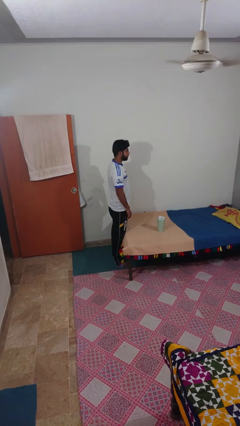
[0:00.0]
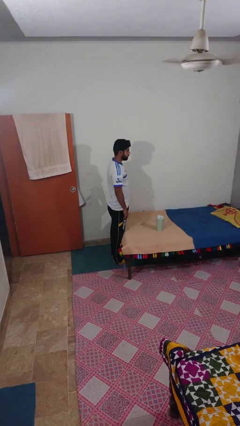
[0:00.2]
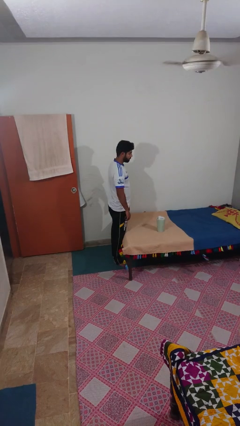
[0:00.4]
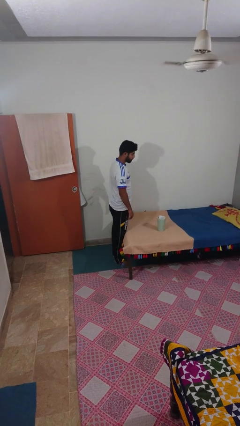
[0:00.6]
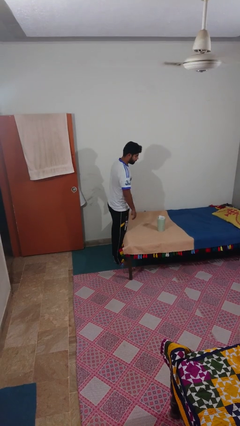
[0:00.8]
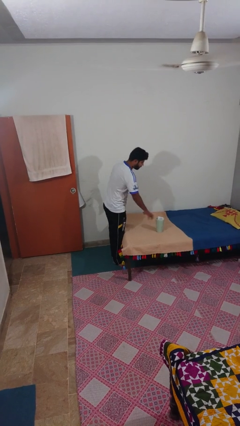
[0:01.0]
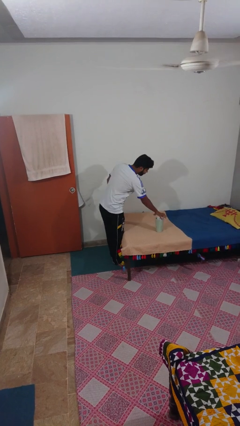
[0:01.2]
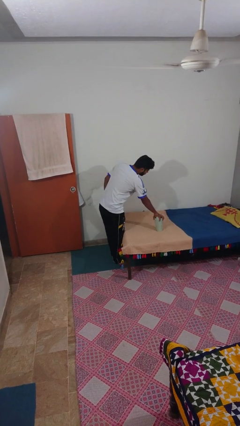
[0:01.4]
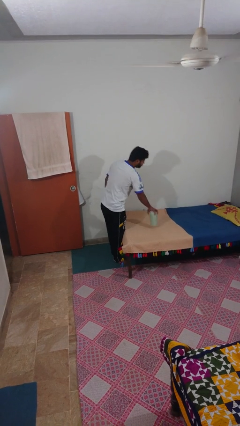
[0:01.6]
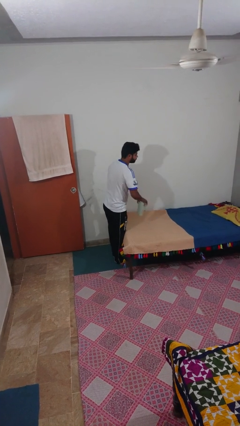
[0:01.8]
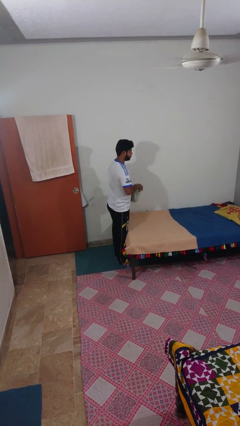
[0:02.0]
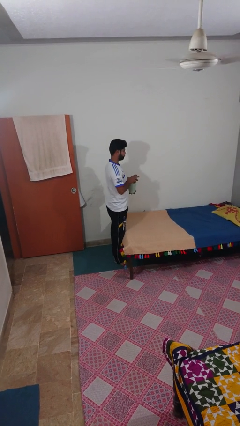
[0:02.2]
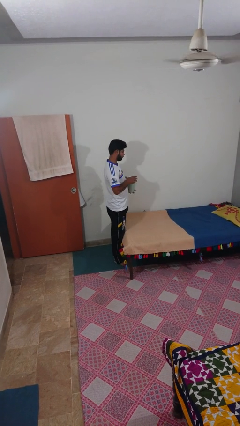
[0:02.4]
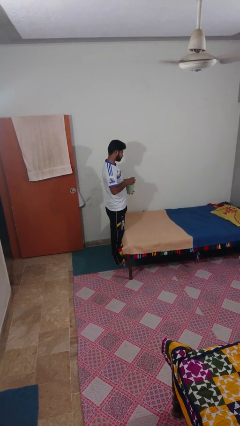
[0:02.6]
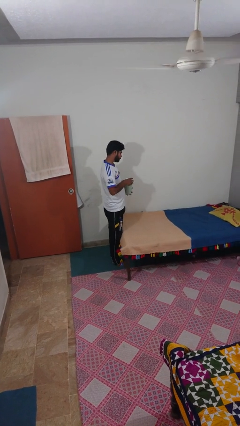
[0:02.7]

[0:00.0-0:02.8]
person picks up object from bed

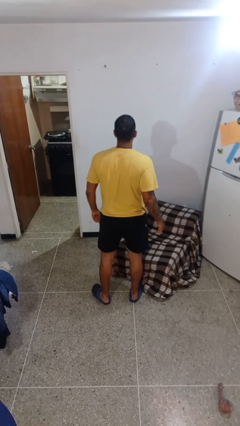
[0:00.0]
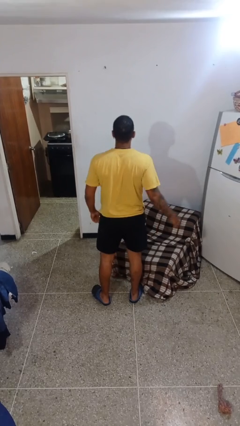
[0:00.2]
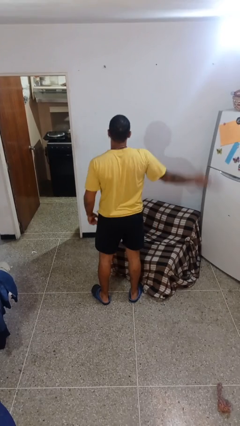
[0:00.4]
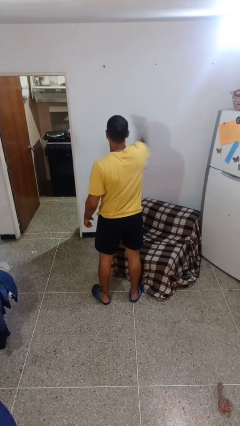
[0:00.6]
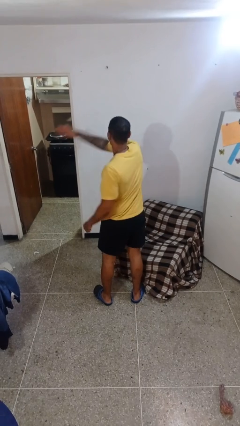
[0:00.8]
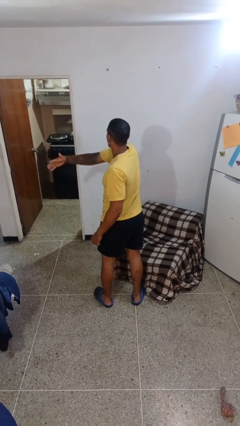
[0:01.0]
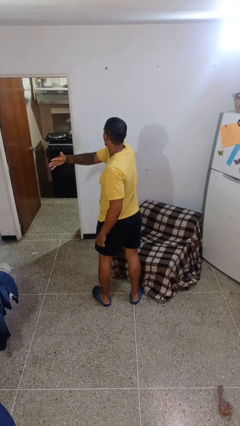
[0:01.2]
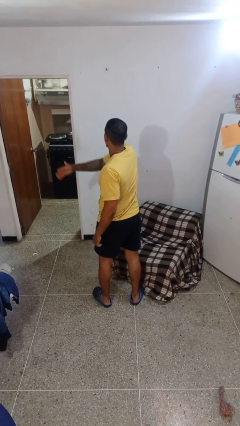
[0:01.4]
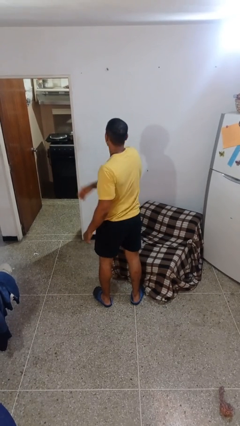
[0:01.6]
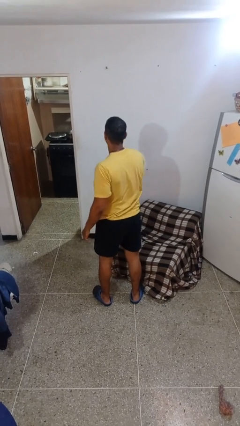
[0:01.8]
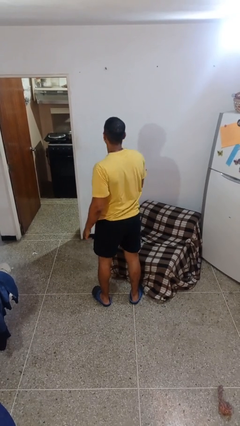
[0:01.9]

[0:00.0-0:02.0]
person gestures swipe left

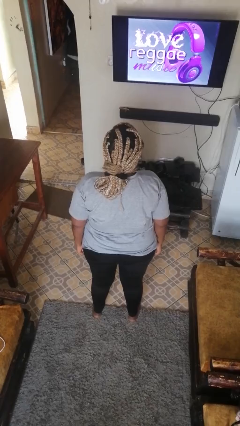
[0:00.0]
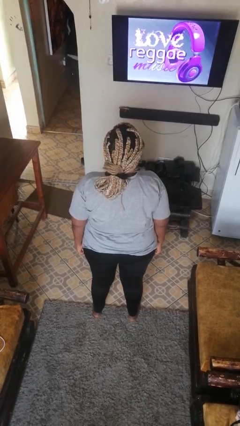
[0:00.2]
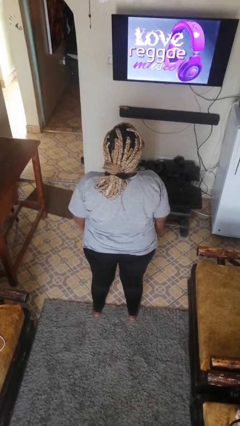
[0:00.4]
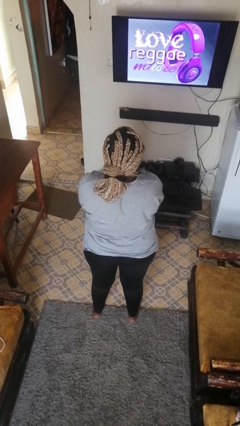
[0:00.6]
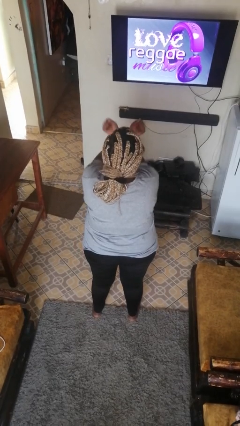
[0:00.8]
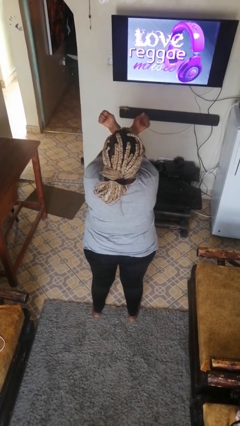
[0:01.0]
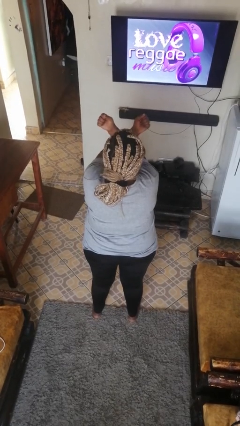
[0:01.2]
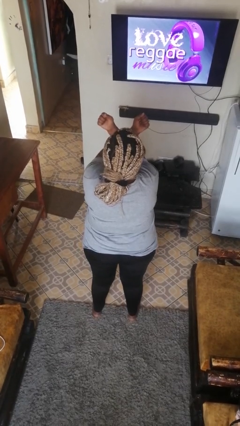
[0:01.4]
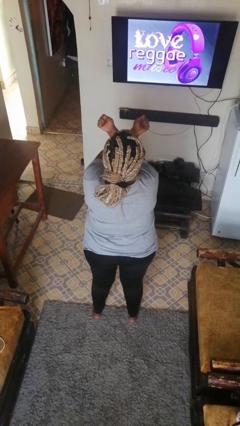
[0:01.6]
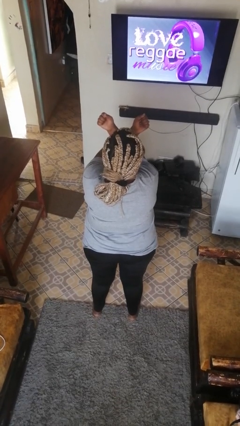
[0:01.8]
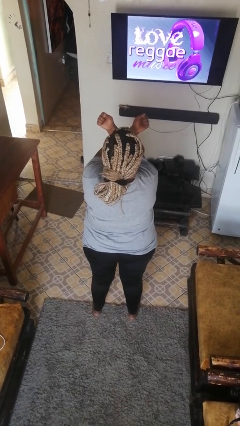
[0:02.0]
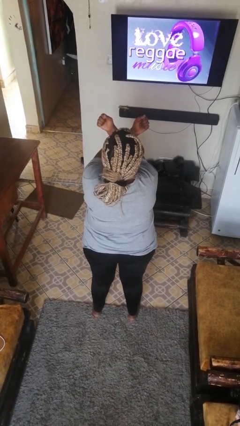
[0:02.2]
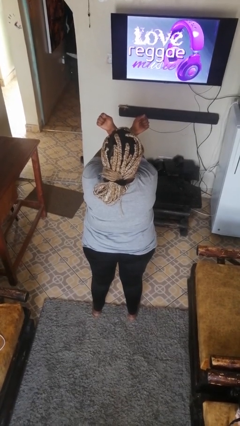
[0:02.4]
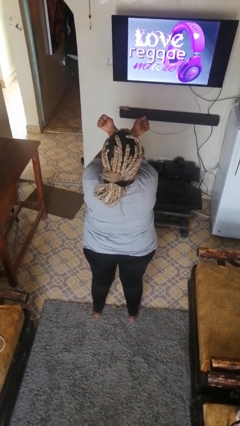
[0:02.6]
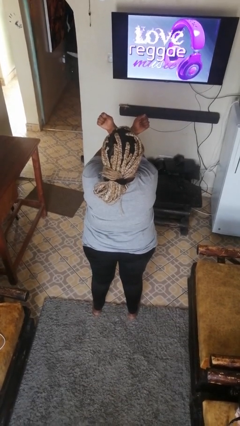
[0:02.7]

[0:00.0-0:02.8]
person gestures arms x

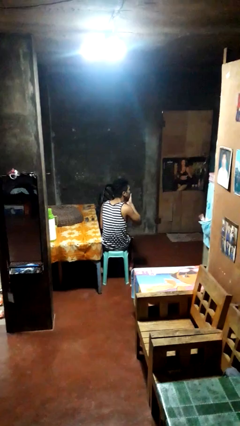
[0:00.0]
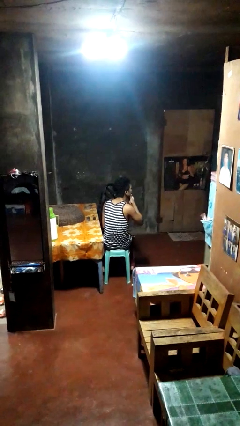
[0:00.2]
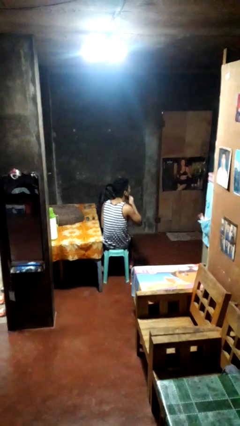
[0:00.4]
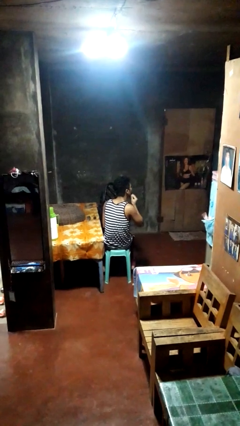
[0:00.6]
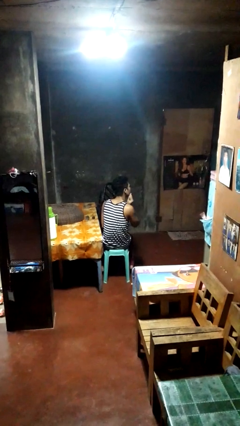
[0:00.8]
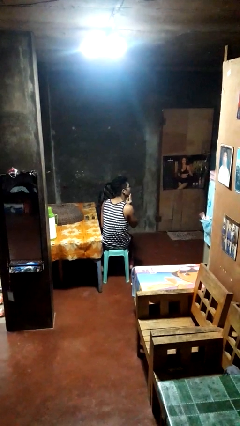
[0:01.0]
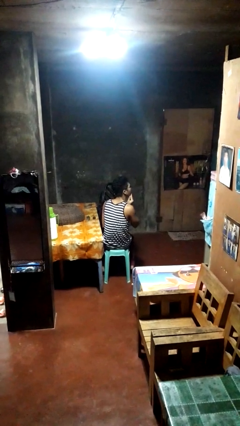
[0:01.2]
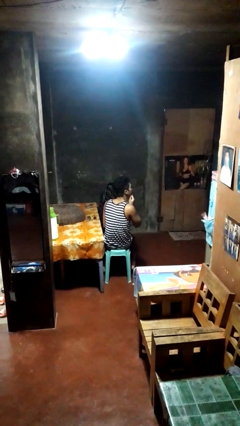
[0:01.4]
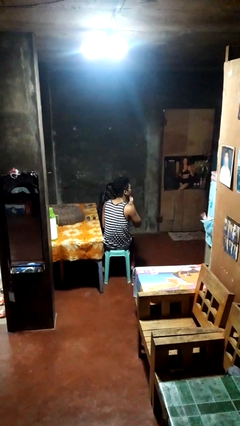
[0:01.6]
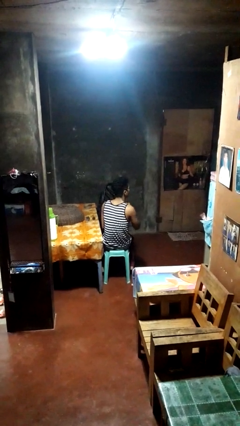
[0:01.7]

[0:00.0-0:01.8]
person strokes chin

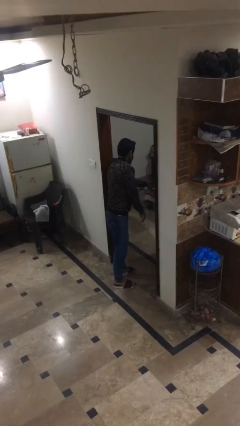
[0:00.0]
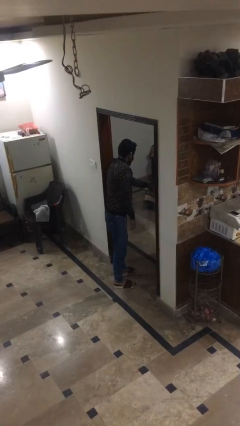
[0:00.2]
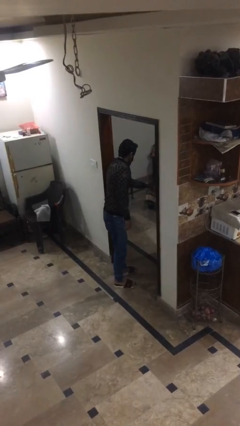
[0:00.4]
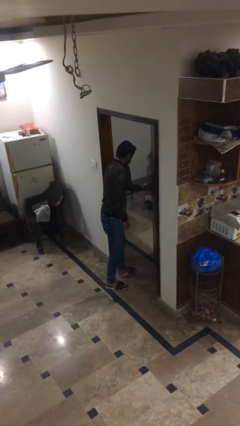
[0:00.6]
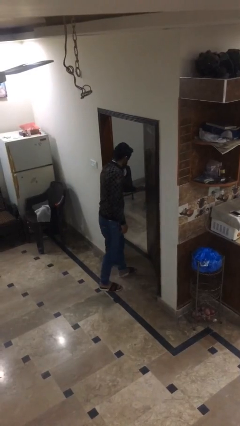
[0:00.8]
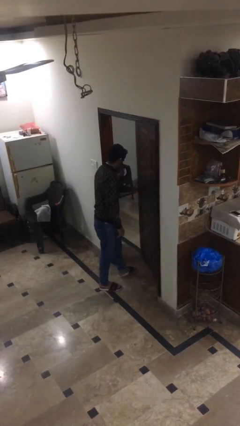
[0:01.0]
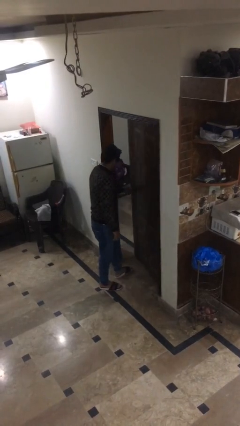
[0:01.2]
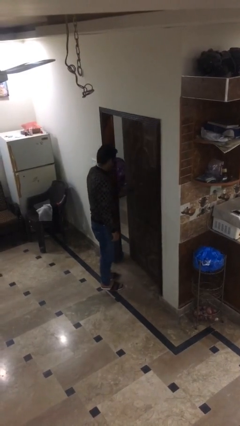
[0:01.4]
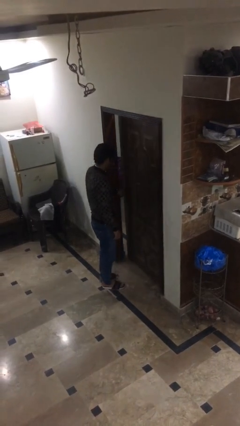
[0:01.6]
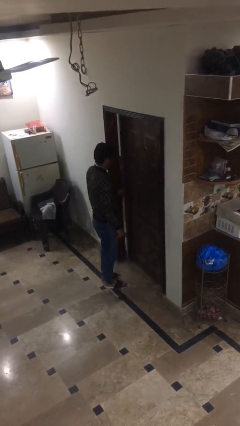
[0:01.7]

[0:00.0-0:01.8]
person closes facility door

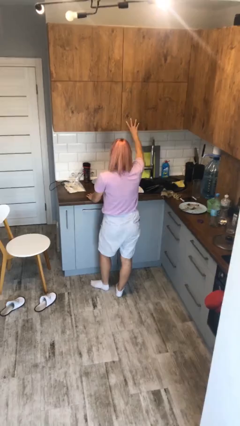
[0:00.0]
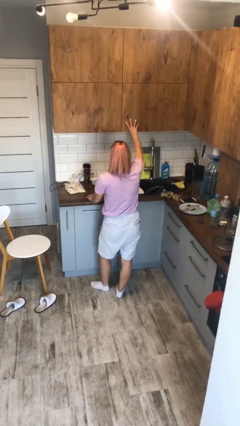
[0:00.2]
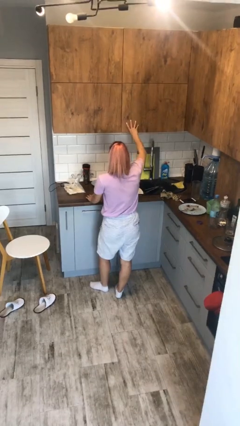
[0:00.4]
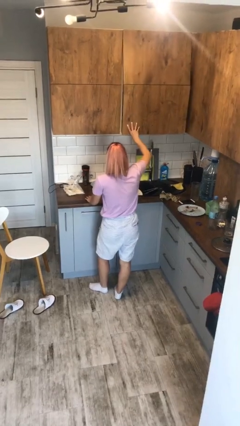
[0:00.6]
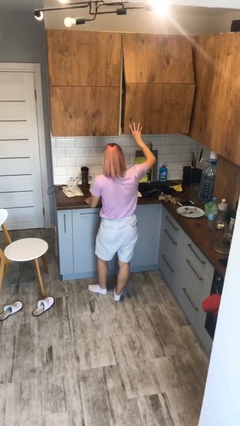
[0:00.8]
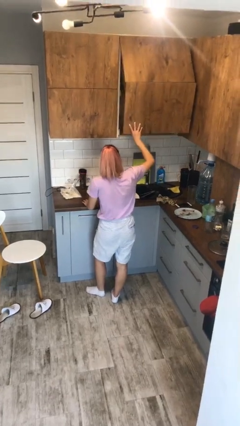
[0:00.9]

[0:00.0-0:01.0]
person closes cabinet

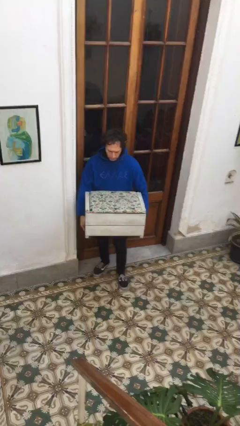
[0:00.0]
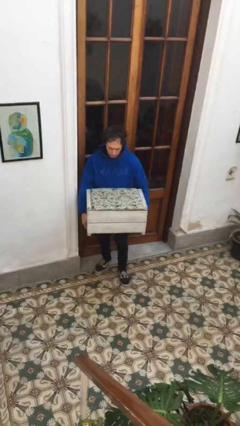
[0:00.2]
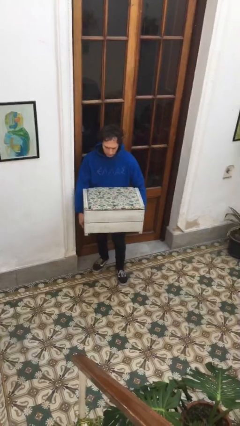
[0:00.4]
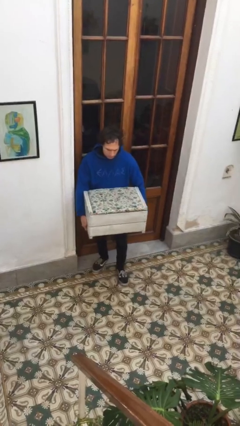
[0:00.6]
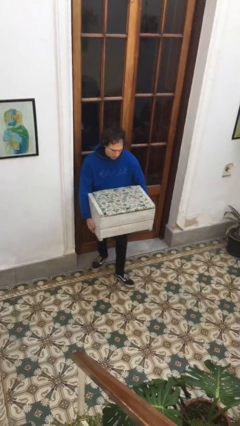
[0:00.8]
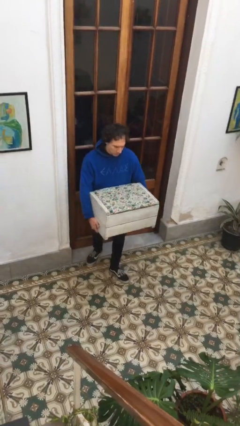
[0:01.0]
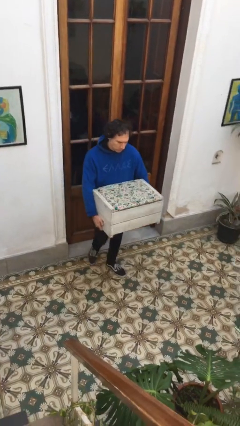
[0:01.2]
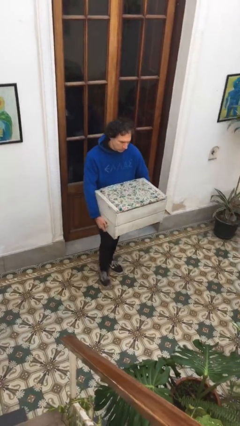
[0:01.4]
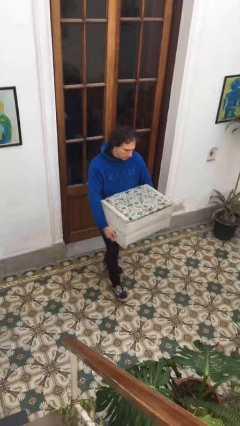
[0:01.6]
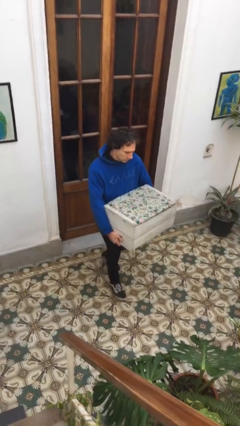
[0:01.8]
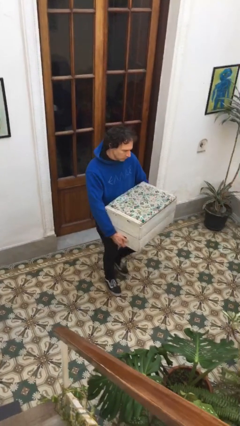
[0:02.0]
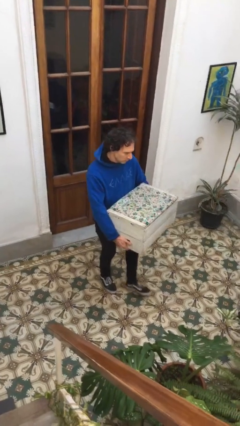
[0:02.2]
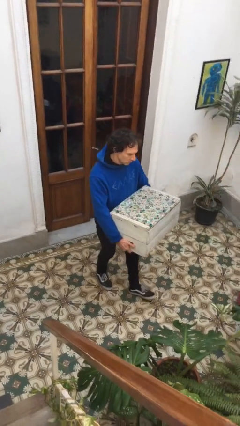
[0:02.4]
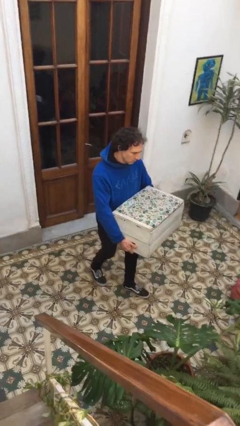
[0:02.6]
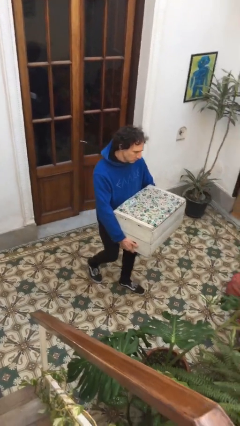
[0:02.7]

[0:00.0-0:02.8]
person carries furniture

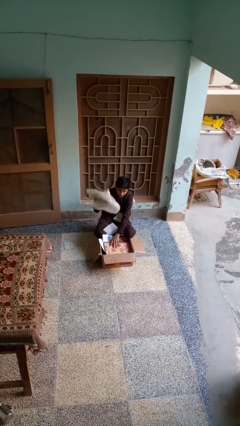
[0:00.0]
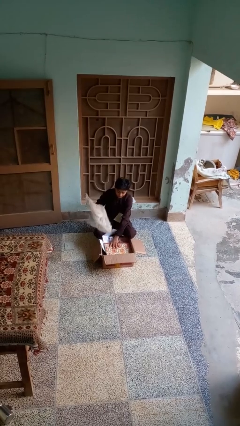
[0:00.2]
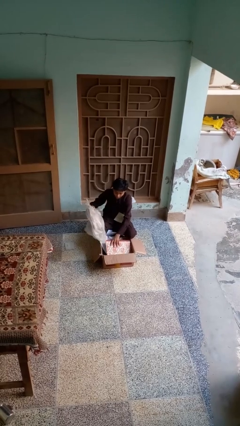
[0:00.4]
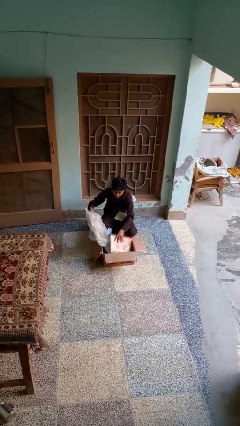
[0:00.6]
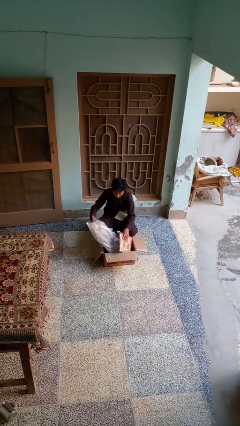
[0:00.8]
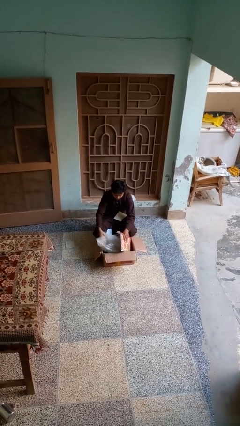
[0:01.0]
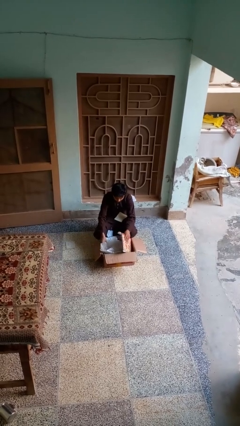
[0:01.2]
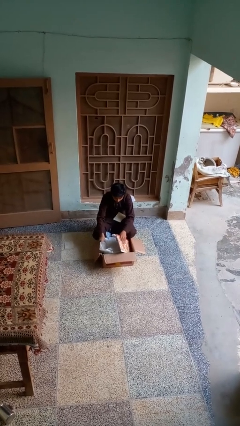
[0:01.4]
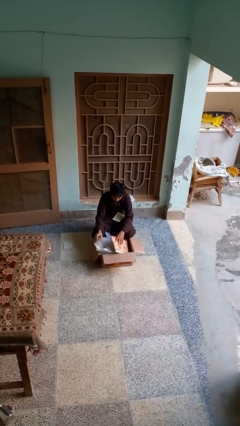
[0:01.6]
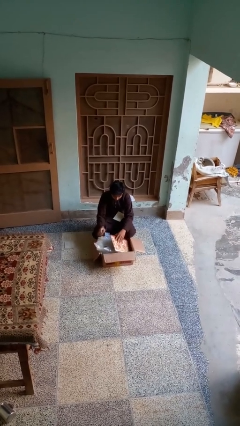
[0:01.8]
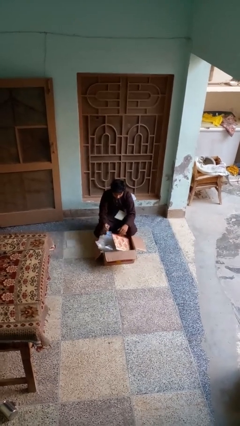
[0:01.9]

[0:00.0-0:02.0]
person puts object into box
